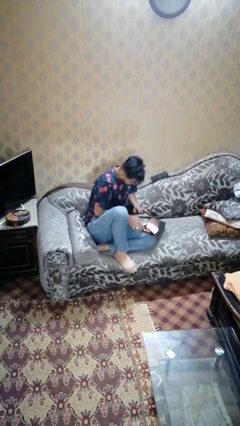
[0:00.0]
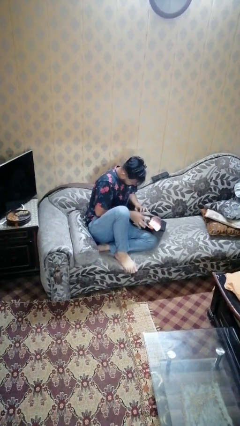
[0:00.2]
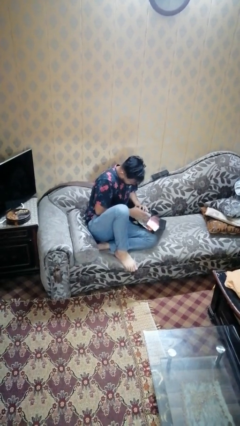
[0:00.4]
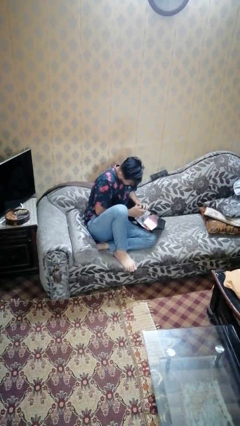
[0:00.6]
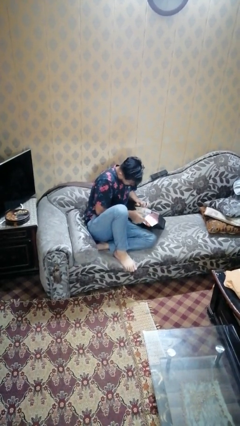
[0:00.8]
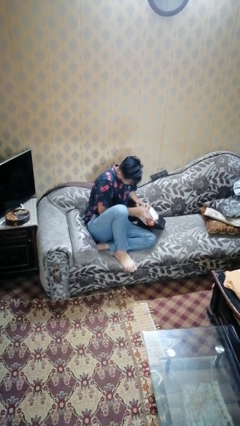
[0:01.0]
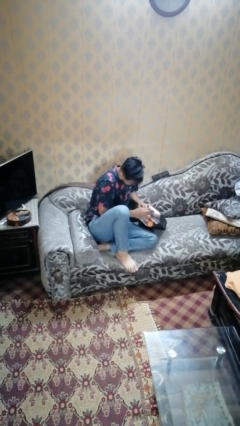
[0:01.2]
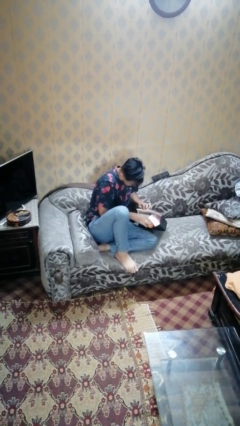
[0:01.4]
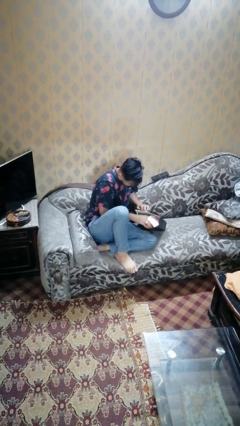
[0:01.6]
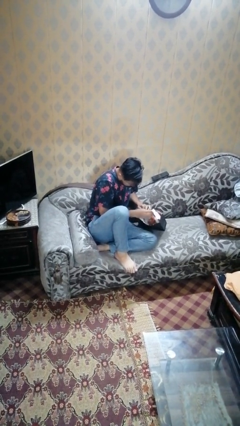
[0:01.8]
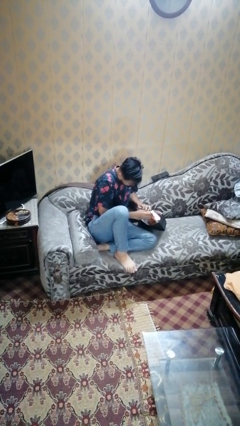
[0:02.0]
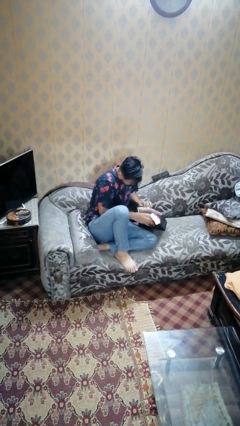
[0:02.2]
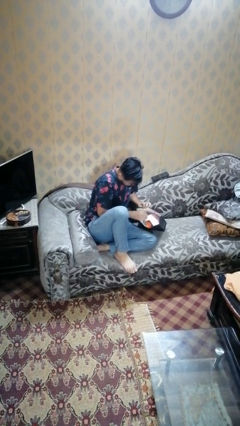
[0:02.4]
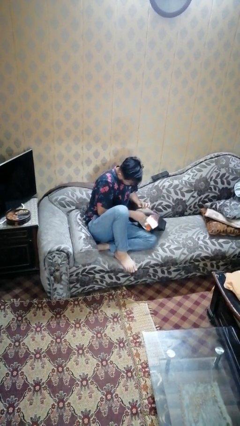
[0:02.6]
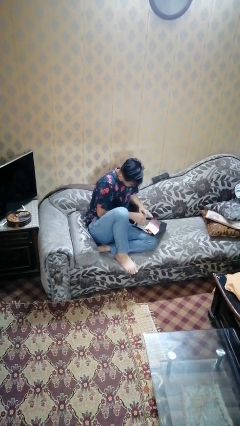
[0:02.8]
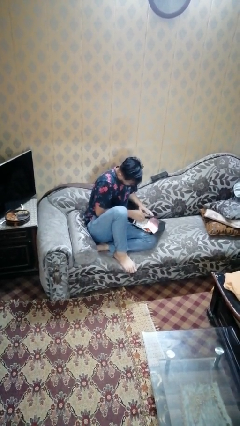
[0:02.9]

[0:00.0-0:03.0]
person searches in bag

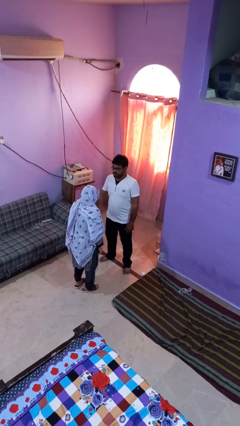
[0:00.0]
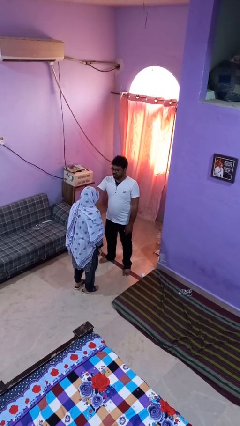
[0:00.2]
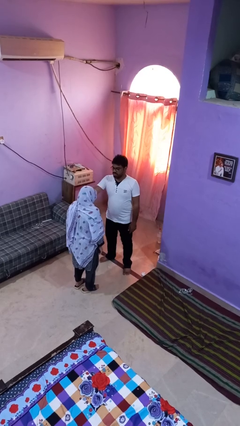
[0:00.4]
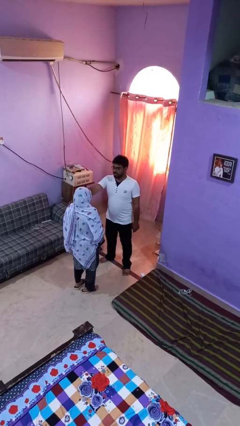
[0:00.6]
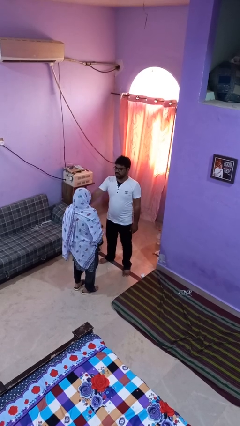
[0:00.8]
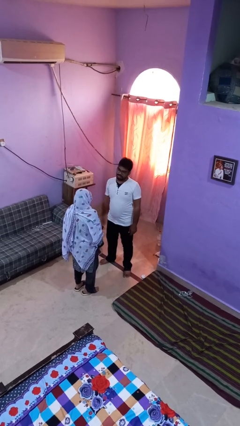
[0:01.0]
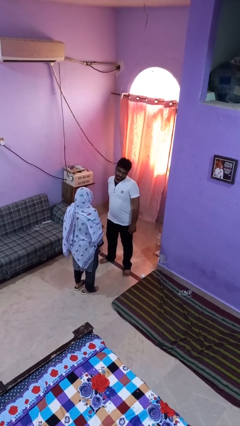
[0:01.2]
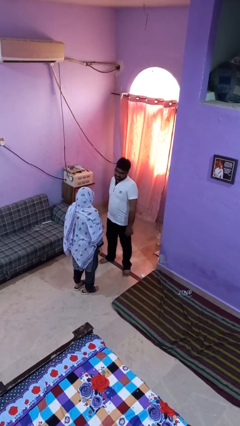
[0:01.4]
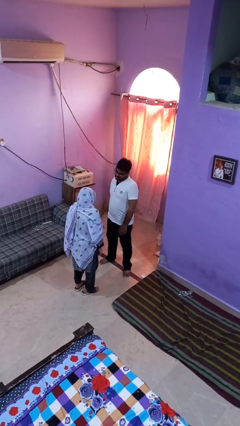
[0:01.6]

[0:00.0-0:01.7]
person shoves person

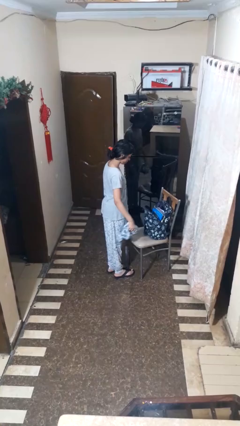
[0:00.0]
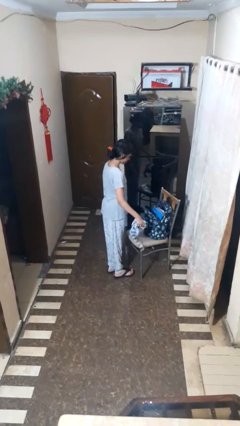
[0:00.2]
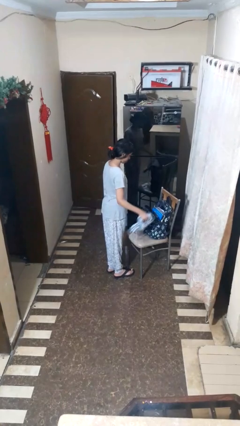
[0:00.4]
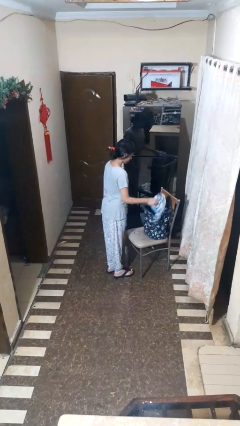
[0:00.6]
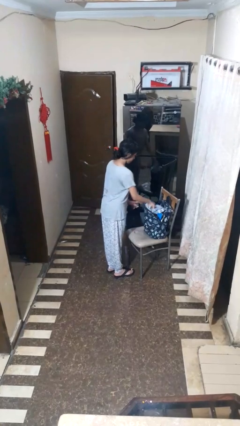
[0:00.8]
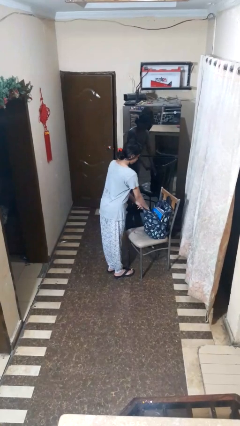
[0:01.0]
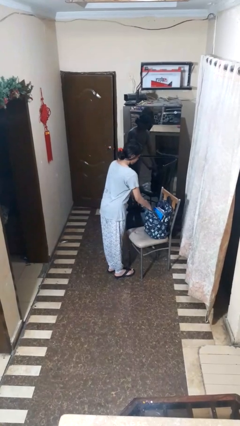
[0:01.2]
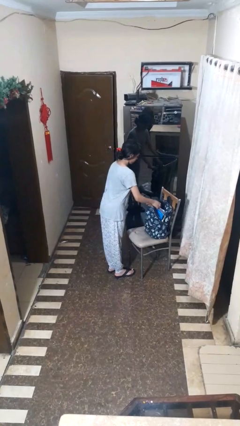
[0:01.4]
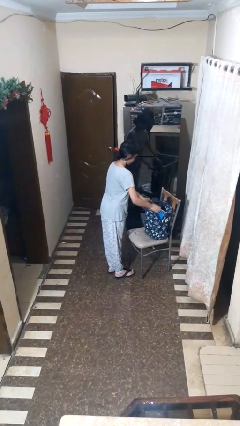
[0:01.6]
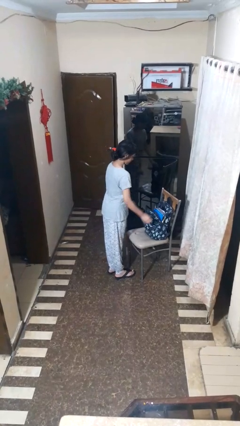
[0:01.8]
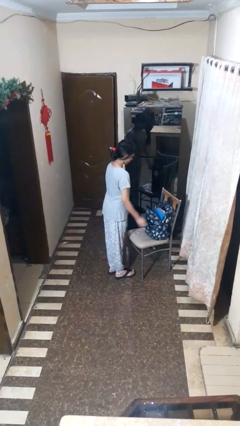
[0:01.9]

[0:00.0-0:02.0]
person puts object into bag

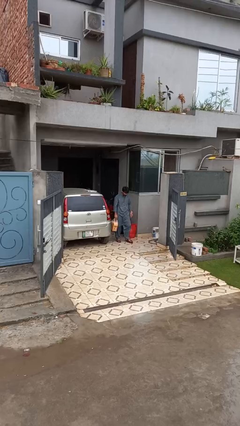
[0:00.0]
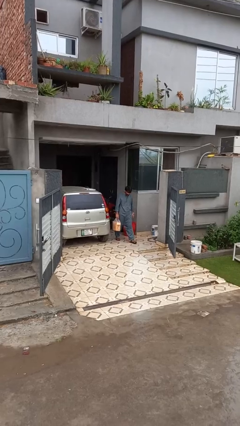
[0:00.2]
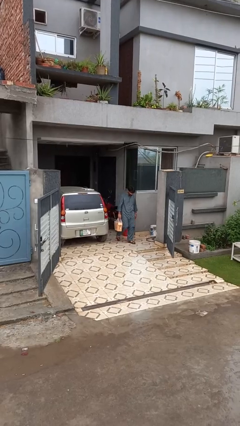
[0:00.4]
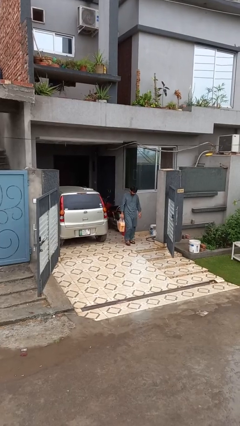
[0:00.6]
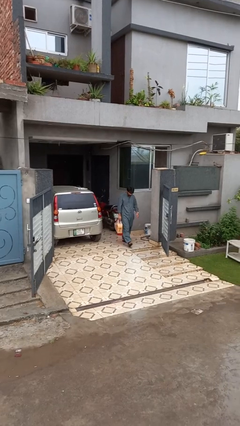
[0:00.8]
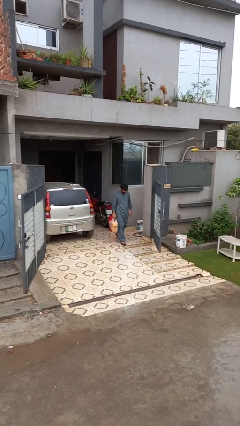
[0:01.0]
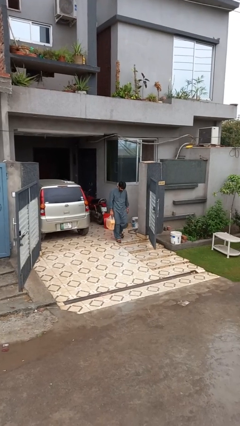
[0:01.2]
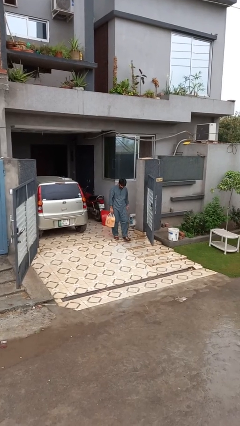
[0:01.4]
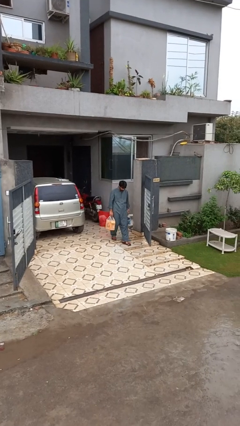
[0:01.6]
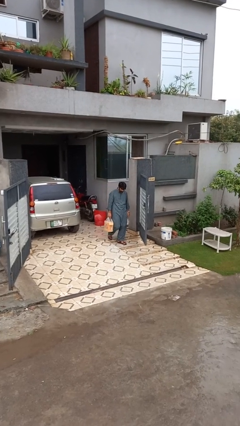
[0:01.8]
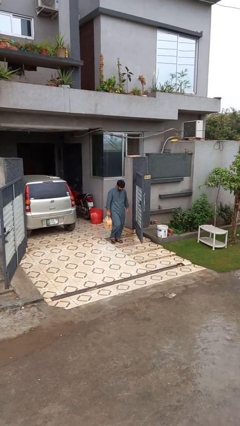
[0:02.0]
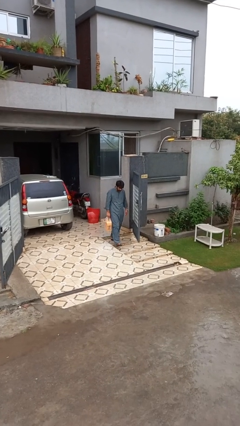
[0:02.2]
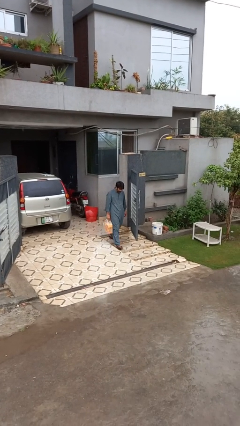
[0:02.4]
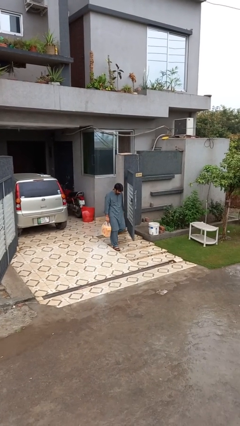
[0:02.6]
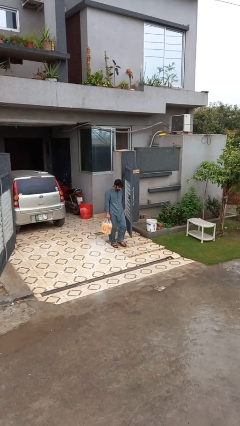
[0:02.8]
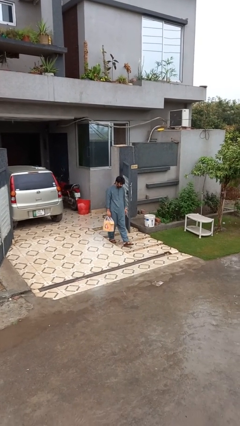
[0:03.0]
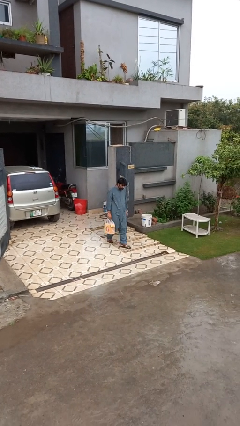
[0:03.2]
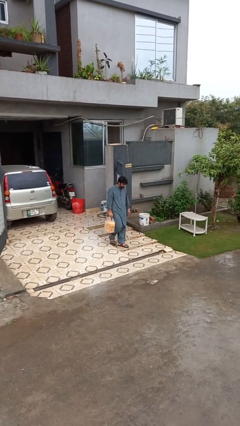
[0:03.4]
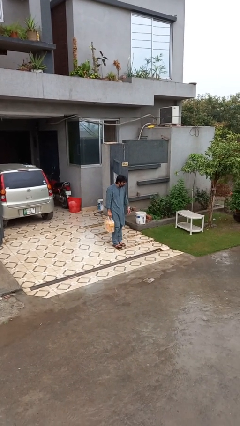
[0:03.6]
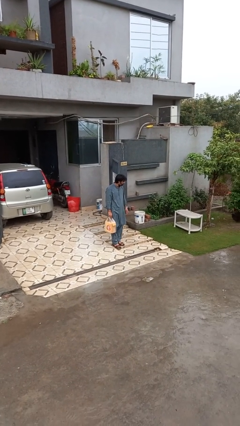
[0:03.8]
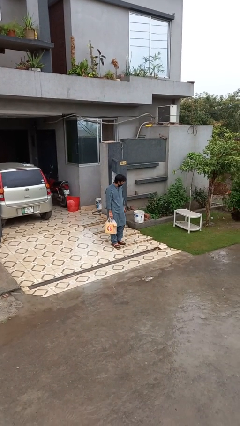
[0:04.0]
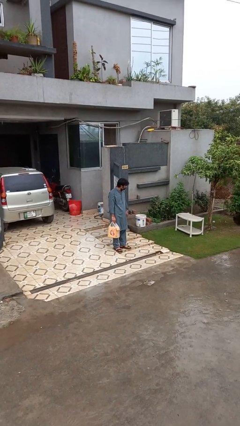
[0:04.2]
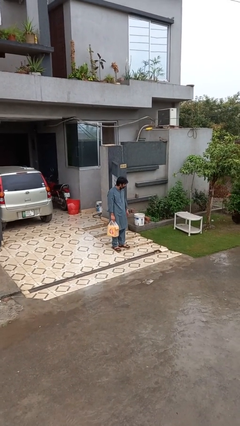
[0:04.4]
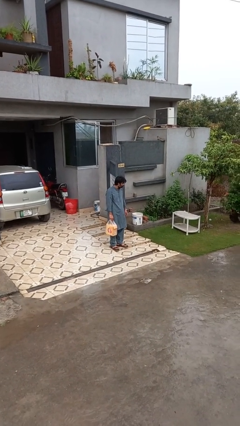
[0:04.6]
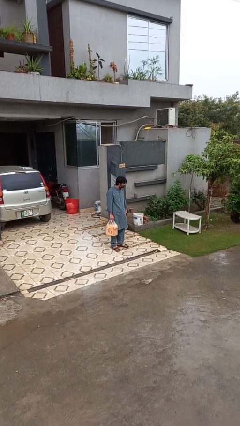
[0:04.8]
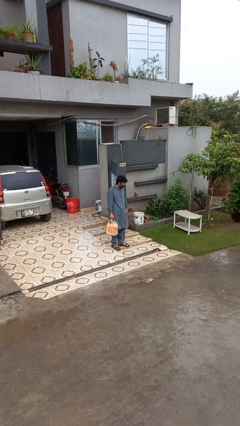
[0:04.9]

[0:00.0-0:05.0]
person carries groceries

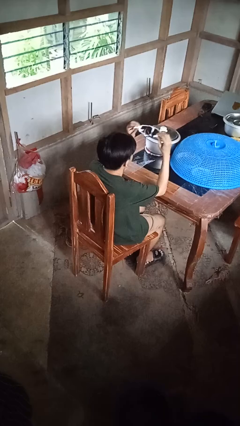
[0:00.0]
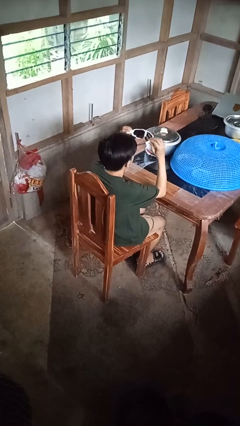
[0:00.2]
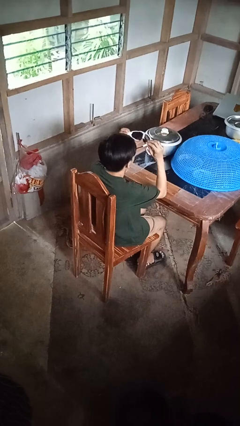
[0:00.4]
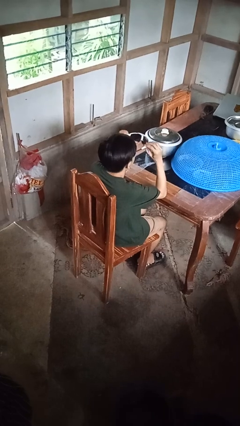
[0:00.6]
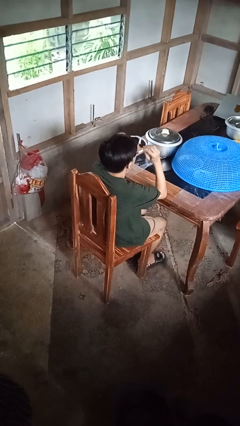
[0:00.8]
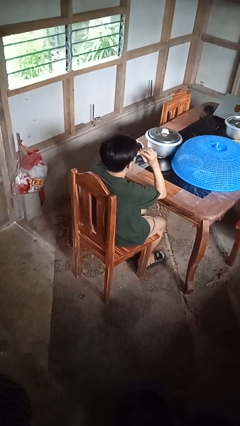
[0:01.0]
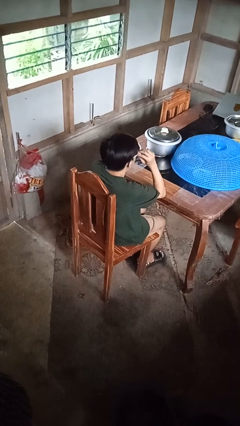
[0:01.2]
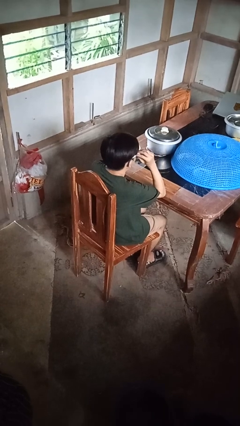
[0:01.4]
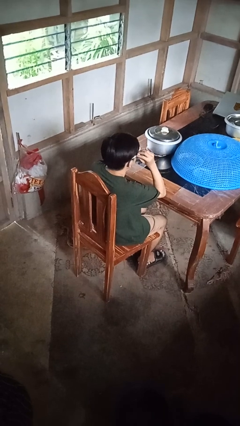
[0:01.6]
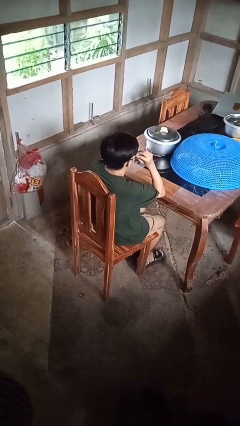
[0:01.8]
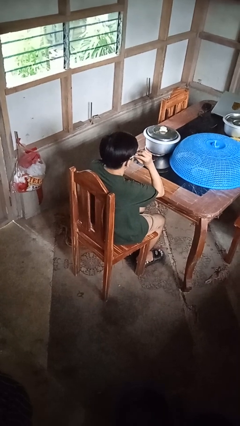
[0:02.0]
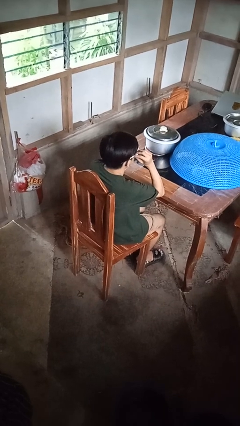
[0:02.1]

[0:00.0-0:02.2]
person puts on sunglasses

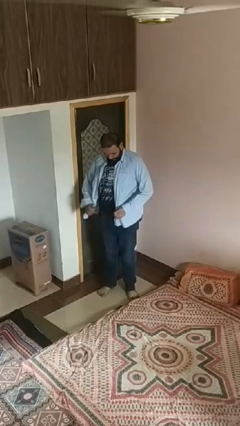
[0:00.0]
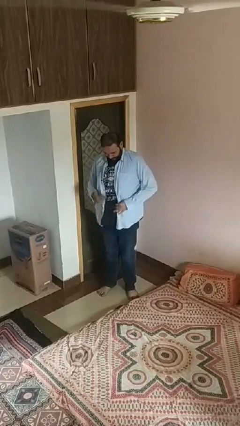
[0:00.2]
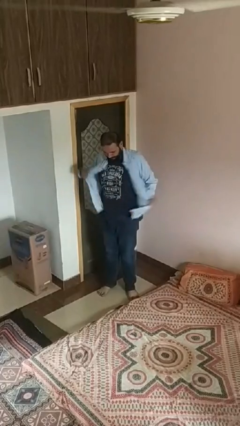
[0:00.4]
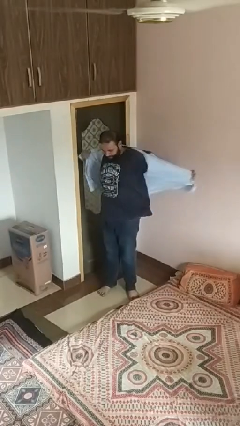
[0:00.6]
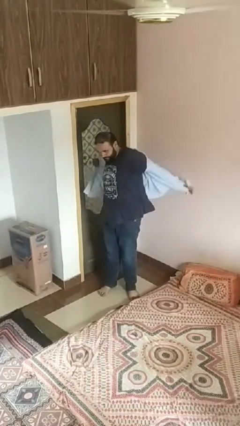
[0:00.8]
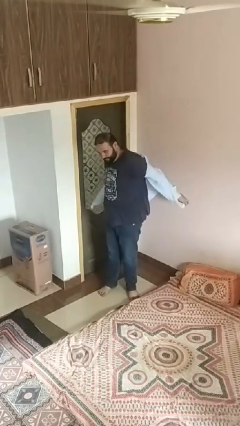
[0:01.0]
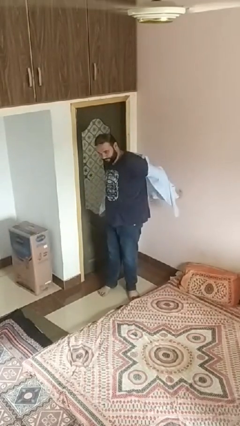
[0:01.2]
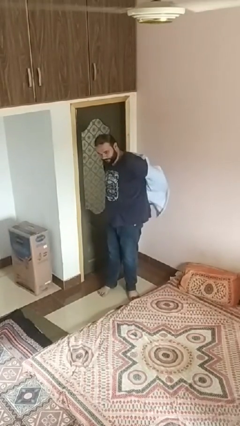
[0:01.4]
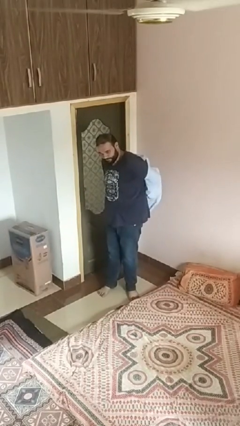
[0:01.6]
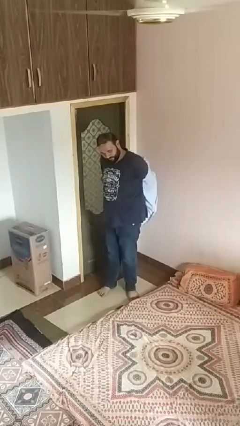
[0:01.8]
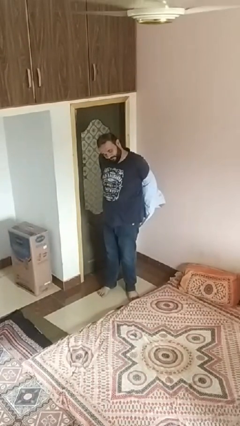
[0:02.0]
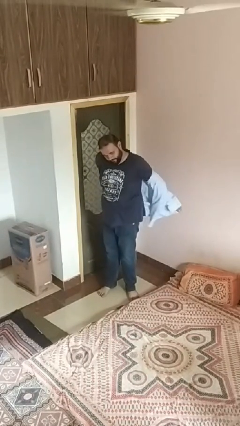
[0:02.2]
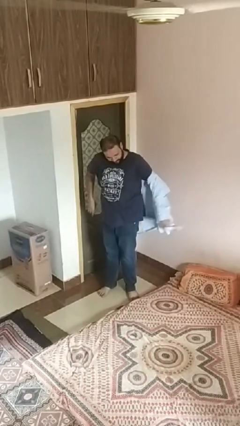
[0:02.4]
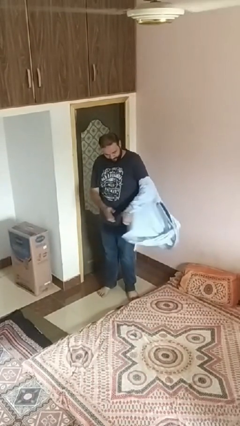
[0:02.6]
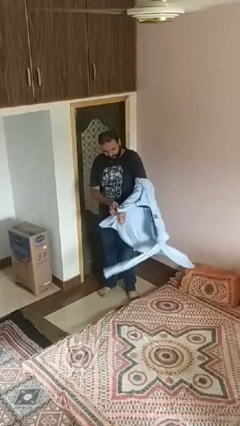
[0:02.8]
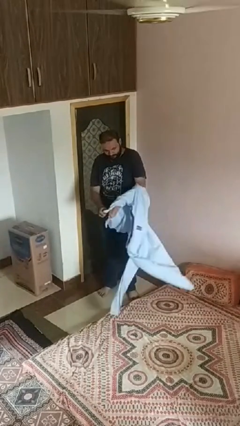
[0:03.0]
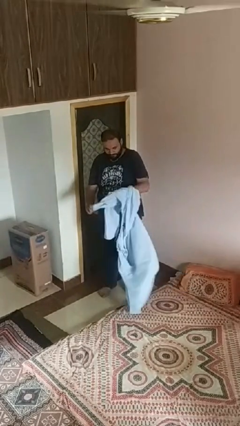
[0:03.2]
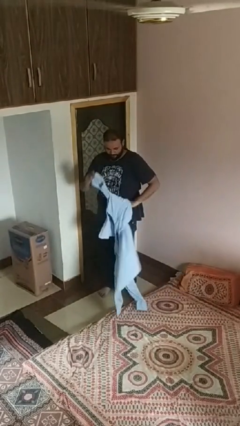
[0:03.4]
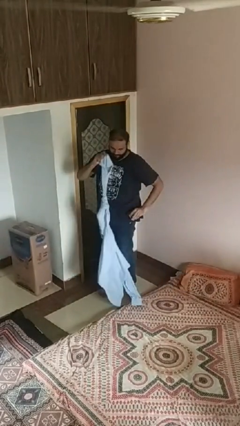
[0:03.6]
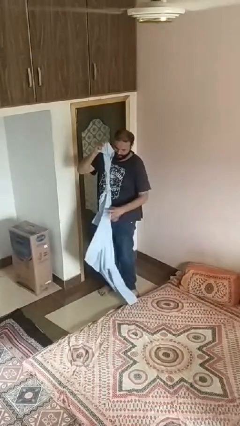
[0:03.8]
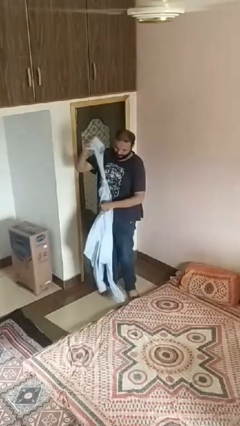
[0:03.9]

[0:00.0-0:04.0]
person takes off shirt
